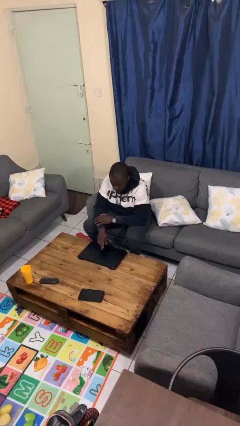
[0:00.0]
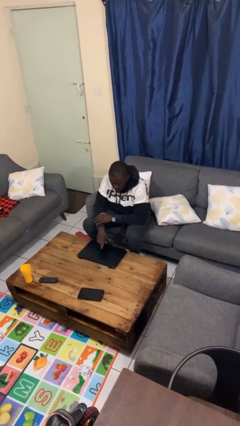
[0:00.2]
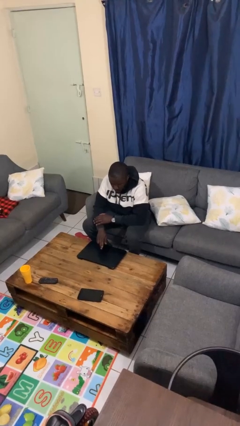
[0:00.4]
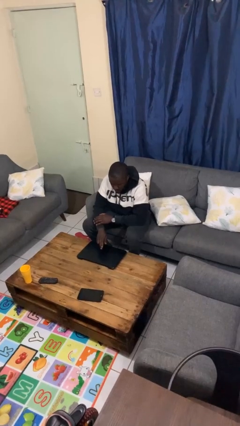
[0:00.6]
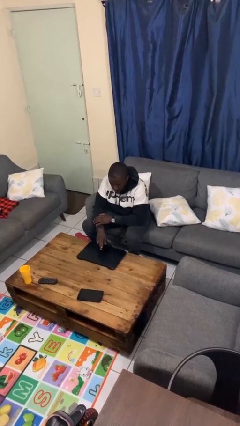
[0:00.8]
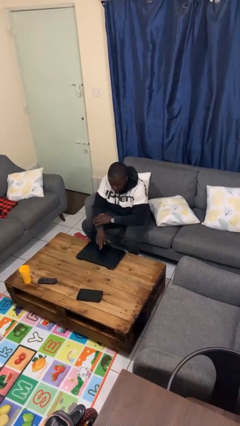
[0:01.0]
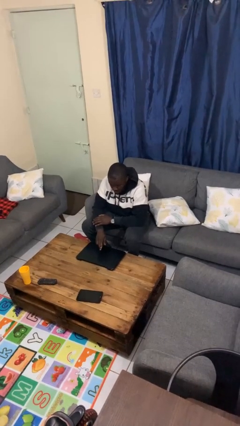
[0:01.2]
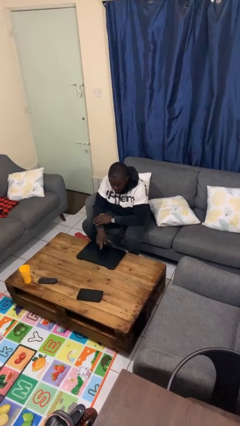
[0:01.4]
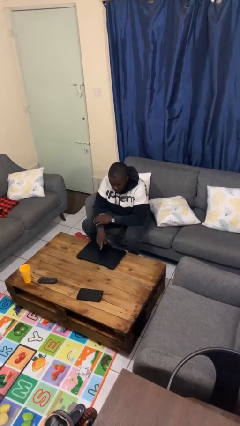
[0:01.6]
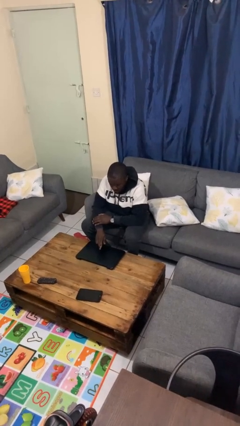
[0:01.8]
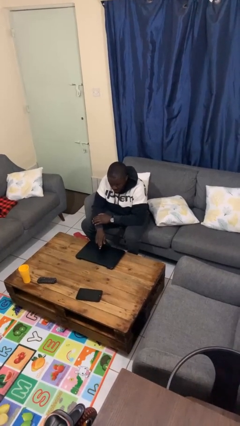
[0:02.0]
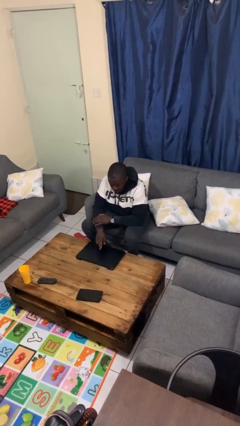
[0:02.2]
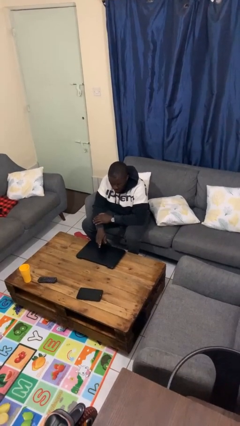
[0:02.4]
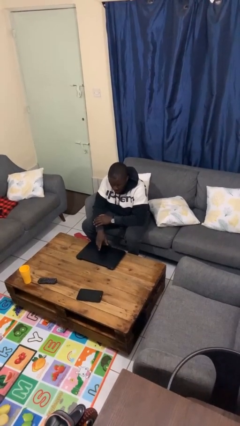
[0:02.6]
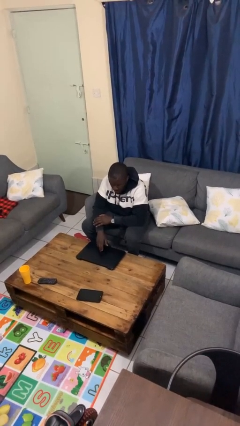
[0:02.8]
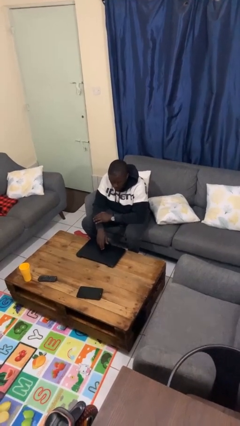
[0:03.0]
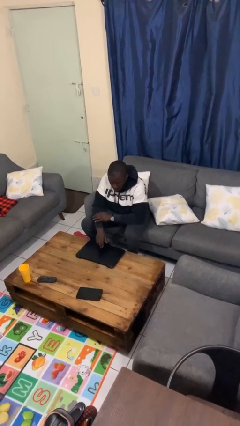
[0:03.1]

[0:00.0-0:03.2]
person taps object with finger

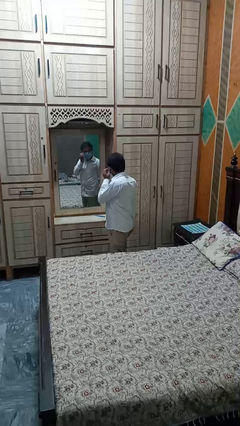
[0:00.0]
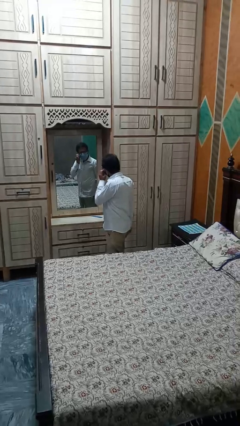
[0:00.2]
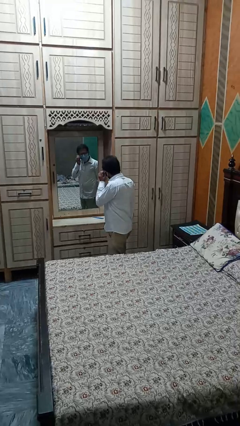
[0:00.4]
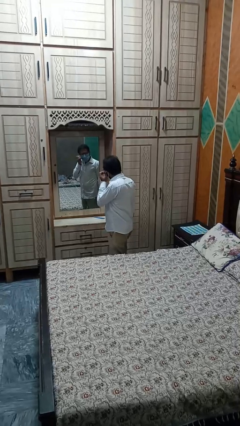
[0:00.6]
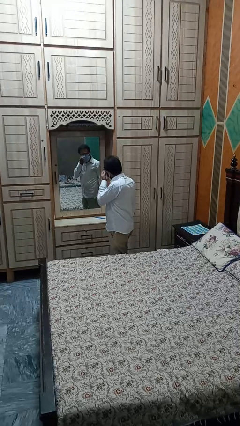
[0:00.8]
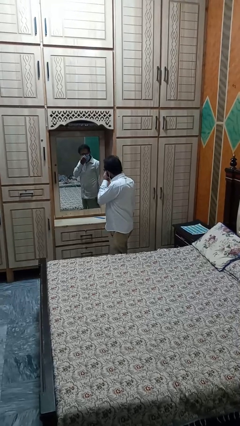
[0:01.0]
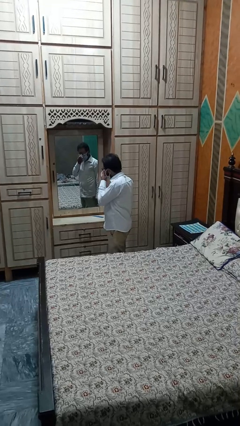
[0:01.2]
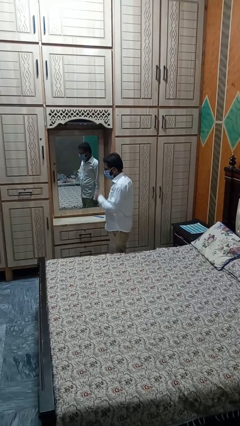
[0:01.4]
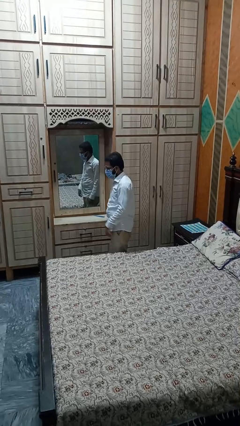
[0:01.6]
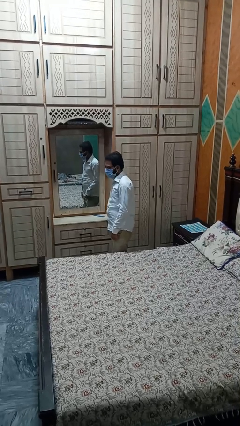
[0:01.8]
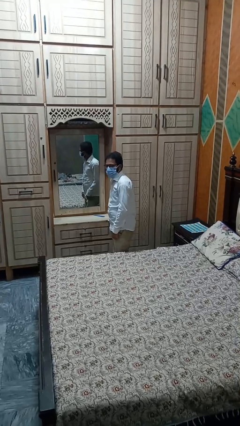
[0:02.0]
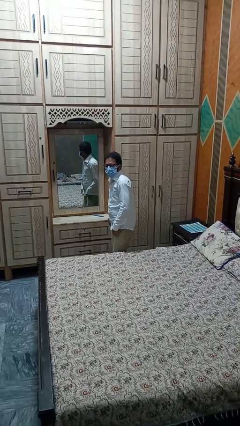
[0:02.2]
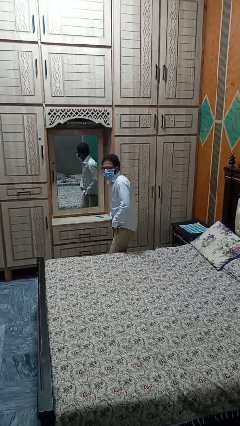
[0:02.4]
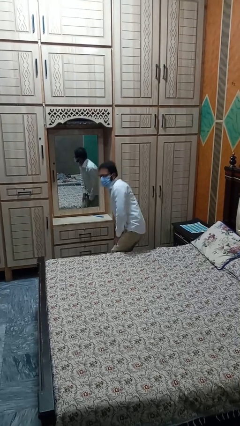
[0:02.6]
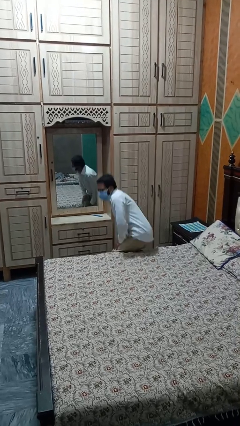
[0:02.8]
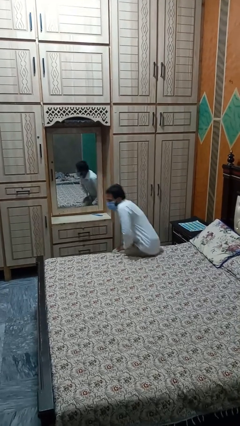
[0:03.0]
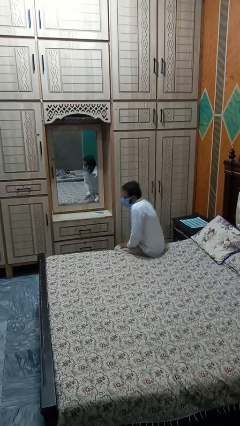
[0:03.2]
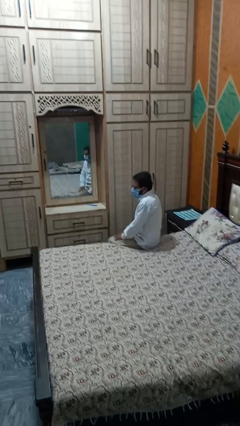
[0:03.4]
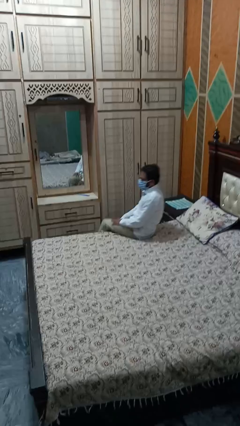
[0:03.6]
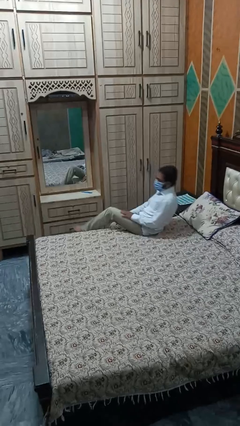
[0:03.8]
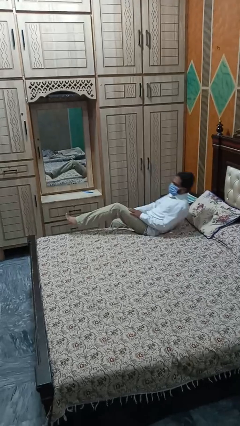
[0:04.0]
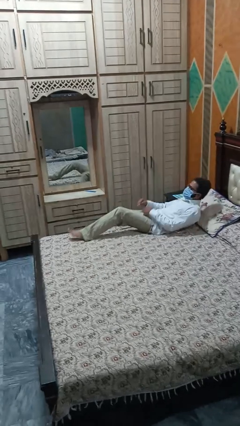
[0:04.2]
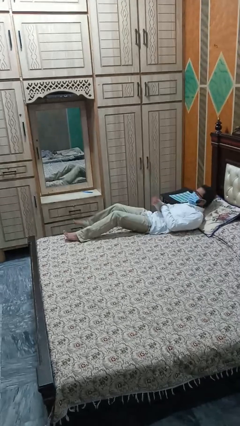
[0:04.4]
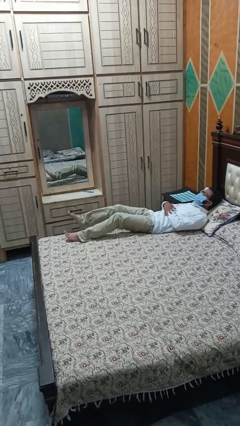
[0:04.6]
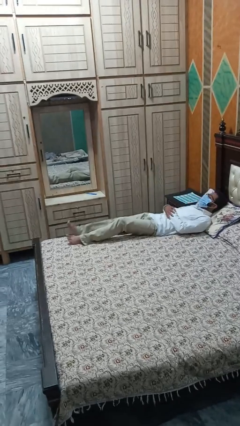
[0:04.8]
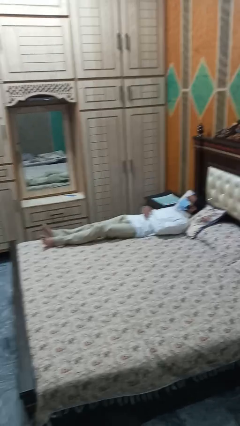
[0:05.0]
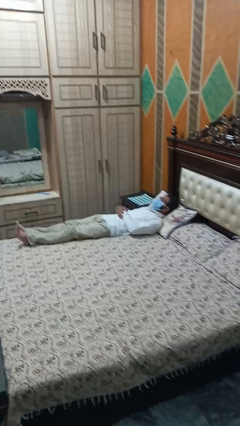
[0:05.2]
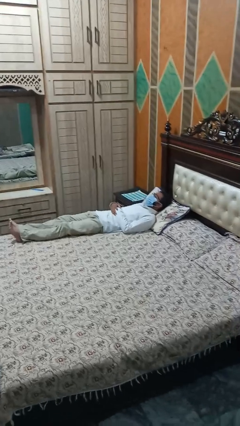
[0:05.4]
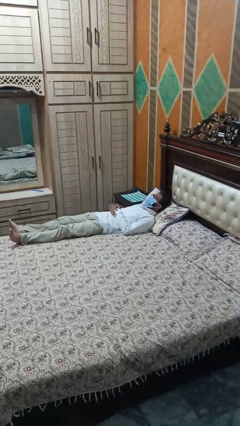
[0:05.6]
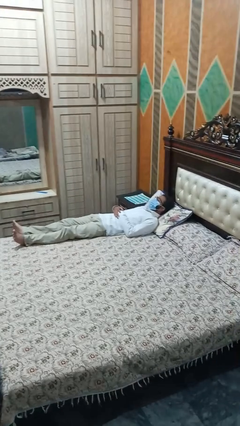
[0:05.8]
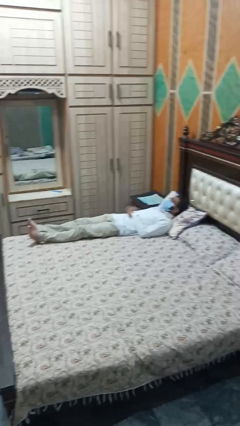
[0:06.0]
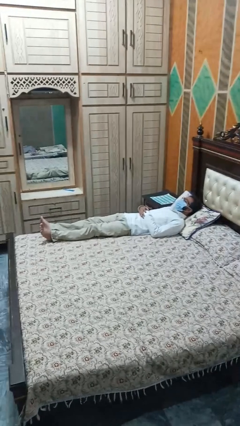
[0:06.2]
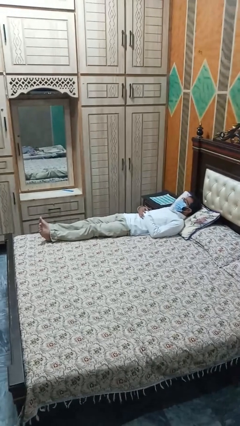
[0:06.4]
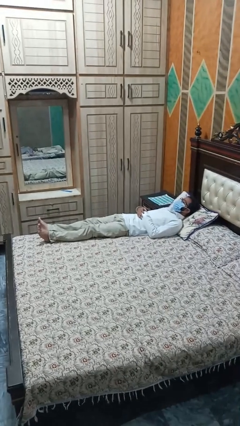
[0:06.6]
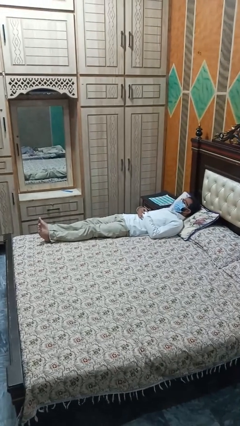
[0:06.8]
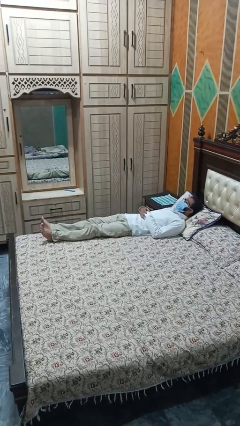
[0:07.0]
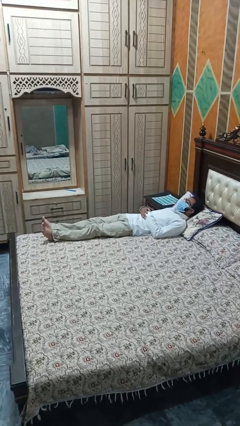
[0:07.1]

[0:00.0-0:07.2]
person lies down on bed

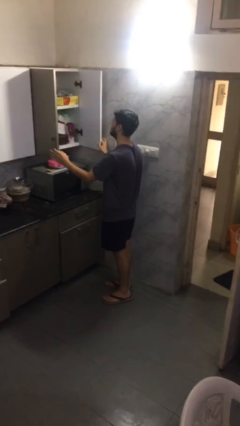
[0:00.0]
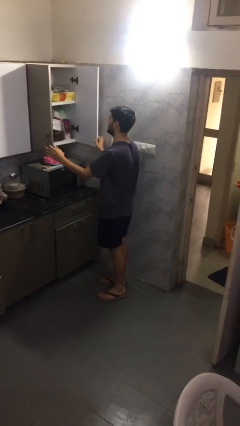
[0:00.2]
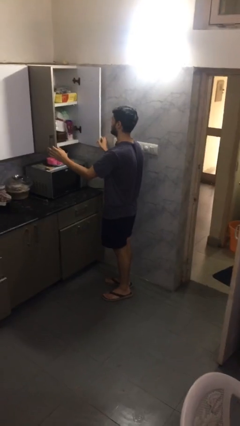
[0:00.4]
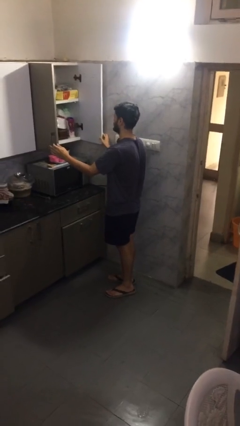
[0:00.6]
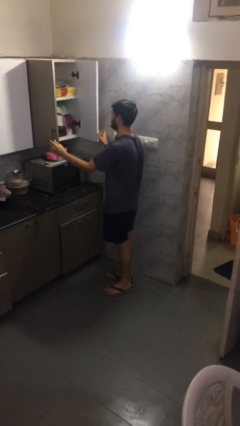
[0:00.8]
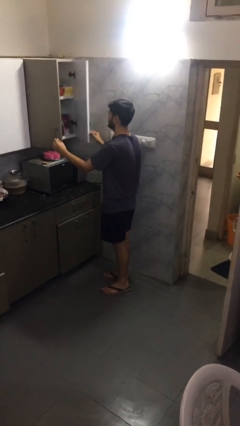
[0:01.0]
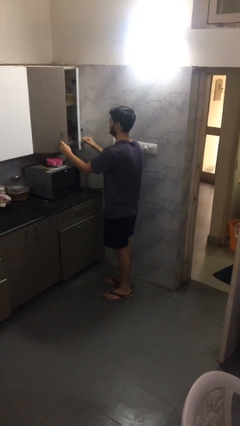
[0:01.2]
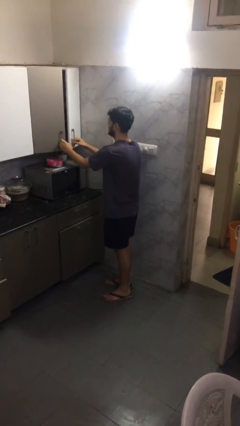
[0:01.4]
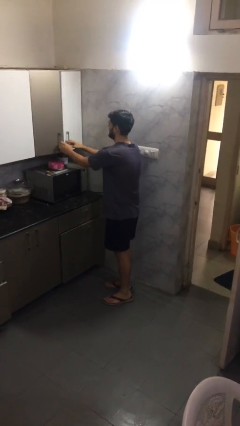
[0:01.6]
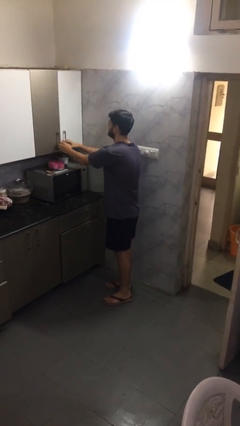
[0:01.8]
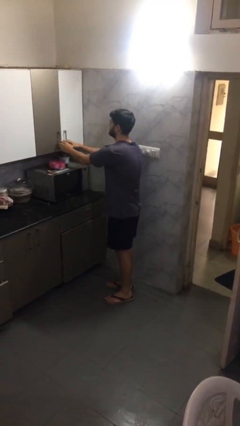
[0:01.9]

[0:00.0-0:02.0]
person closes cabinet

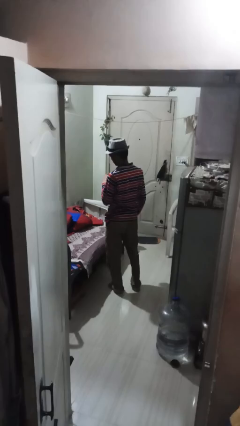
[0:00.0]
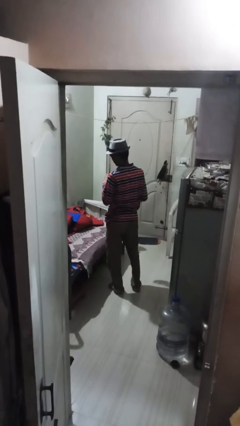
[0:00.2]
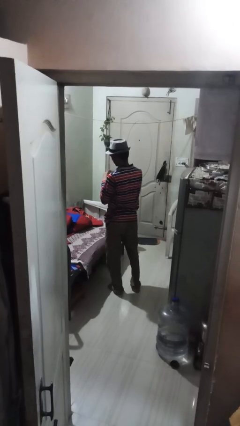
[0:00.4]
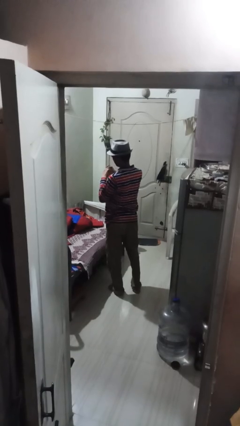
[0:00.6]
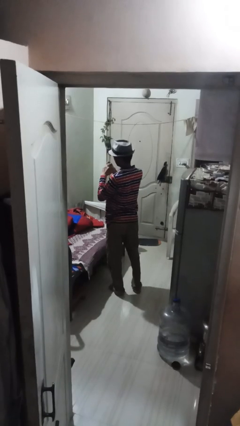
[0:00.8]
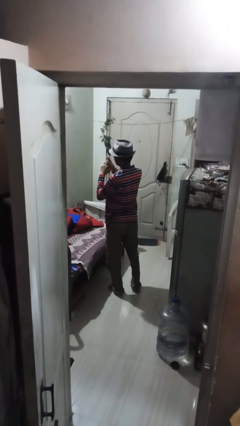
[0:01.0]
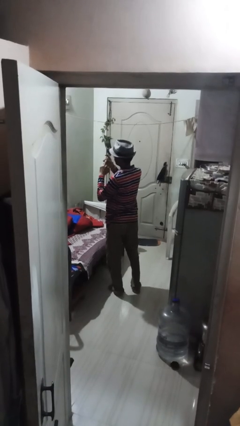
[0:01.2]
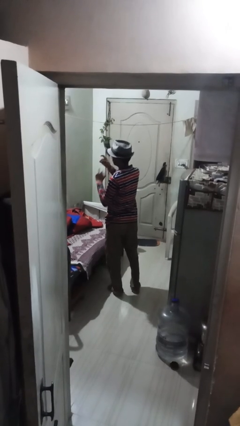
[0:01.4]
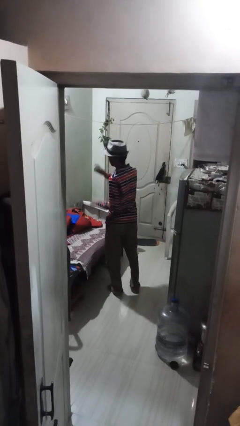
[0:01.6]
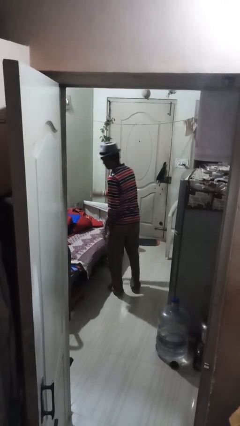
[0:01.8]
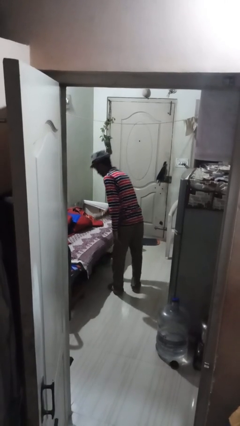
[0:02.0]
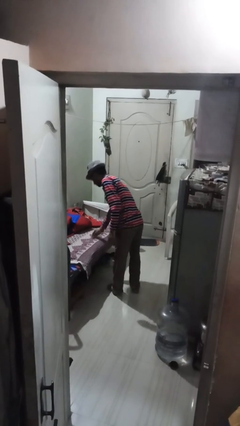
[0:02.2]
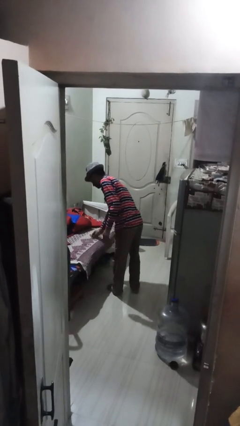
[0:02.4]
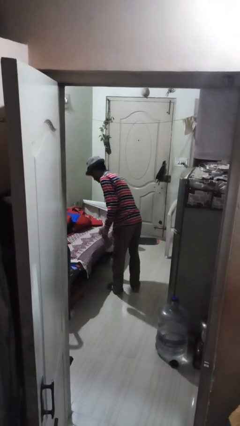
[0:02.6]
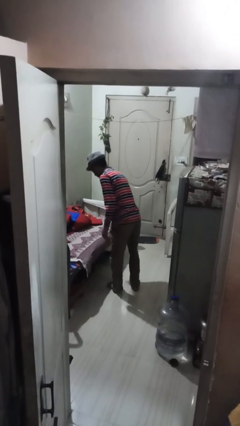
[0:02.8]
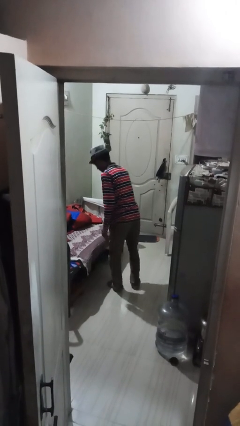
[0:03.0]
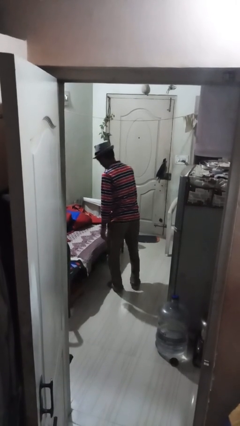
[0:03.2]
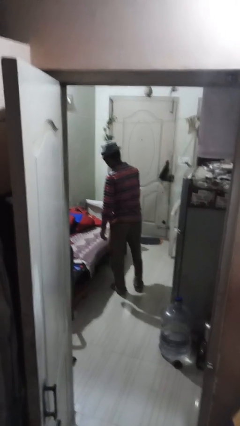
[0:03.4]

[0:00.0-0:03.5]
person takes off ring

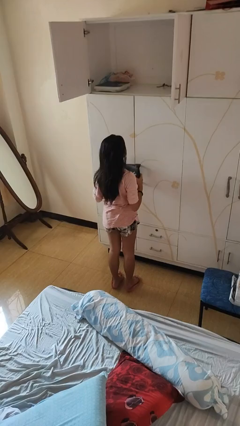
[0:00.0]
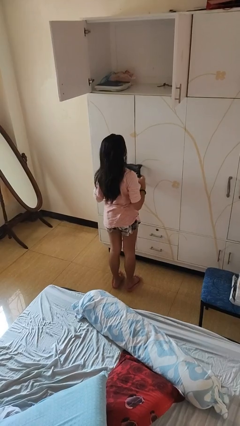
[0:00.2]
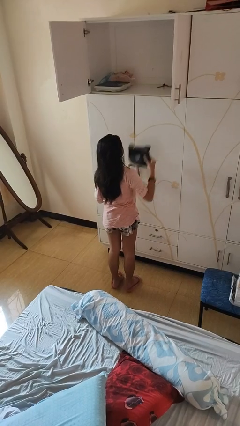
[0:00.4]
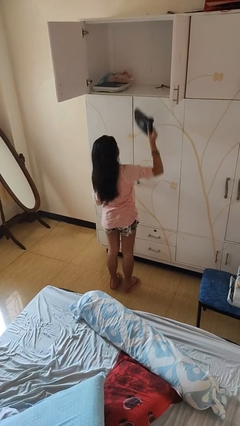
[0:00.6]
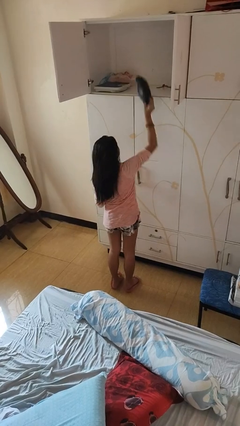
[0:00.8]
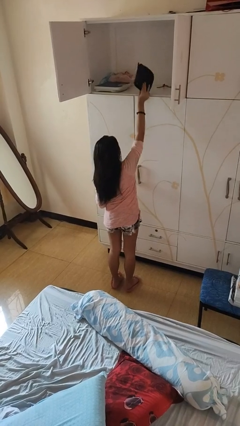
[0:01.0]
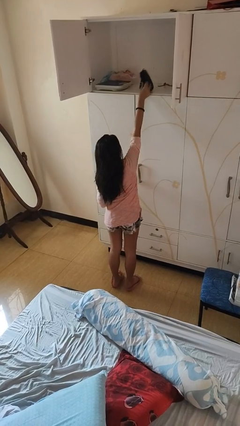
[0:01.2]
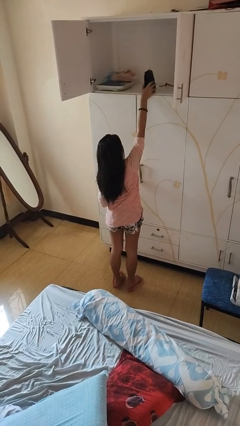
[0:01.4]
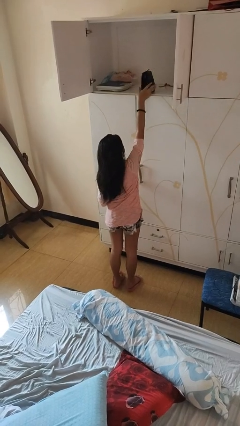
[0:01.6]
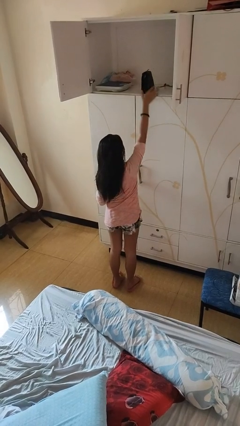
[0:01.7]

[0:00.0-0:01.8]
person puts down object on shelf

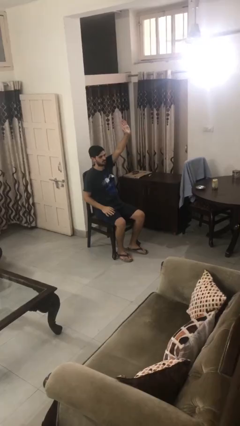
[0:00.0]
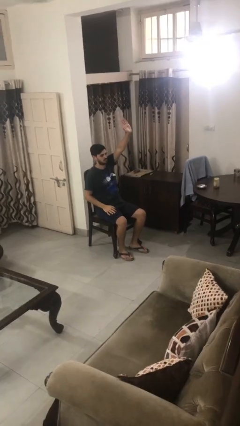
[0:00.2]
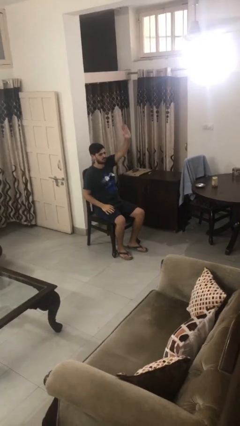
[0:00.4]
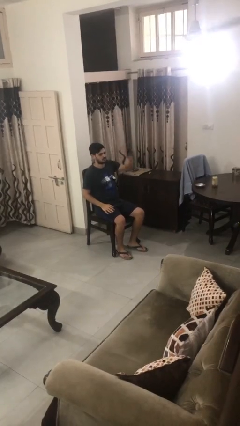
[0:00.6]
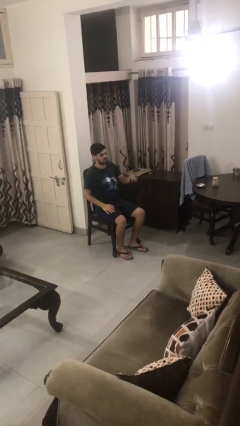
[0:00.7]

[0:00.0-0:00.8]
person gestures lower hand
